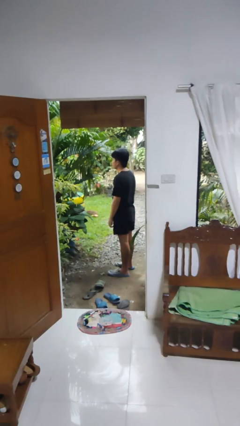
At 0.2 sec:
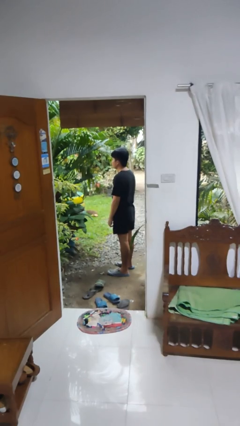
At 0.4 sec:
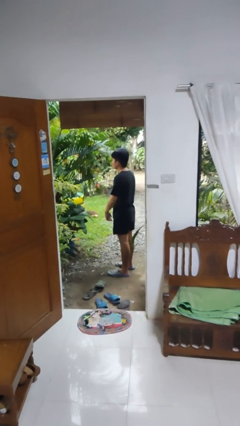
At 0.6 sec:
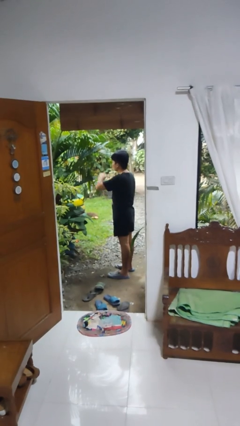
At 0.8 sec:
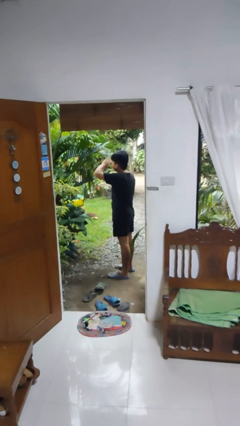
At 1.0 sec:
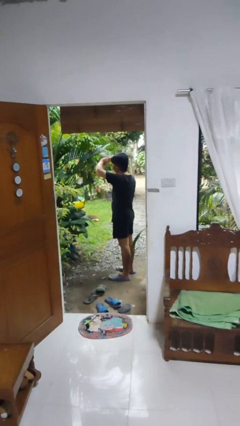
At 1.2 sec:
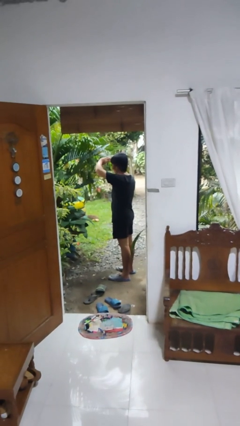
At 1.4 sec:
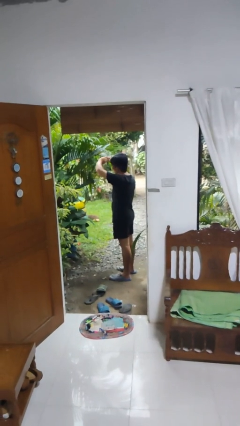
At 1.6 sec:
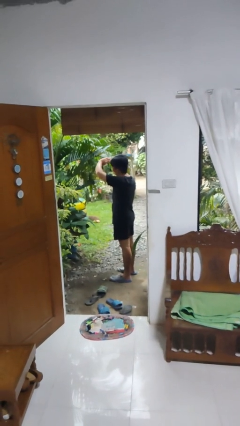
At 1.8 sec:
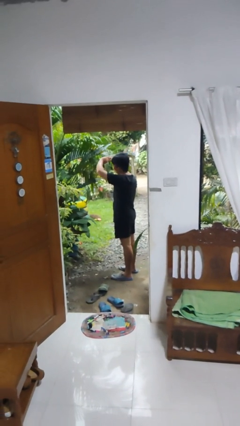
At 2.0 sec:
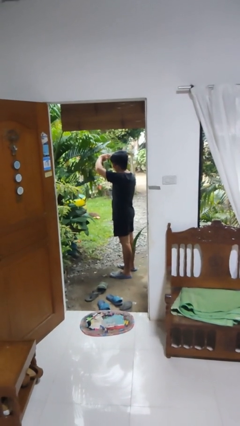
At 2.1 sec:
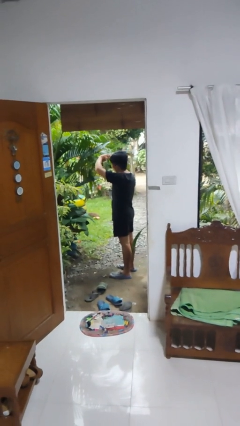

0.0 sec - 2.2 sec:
person shades eyes

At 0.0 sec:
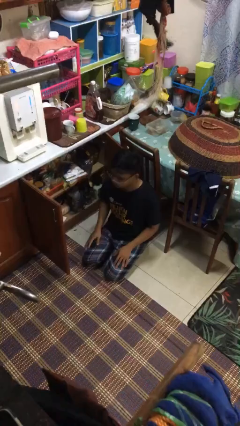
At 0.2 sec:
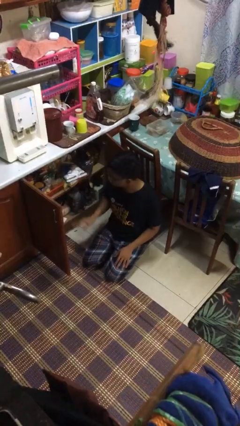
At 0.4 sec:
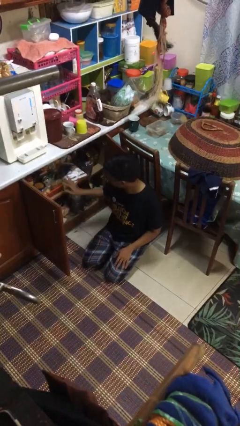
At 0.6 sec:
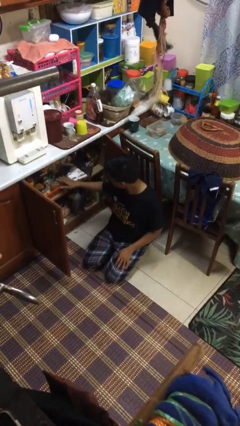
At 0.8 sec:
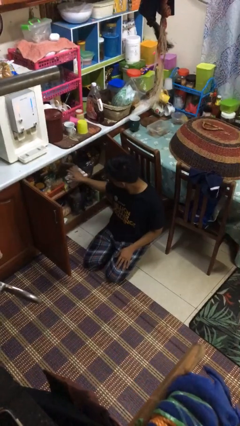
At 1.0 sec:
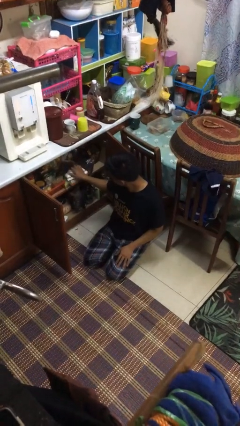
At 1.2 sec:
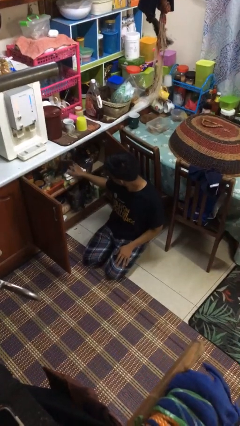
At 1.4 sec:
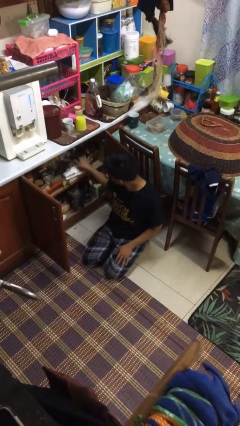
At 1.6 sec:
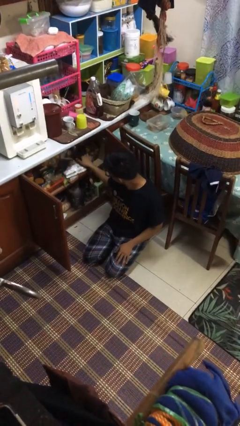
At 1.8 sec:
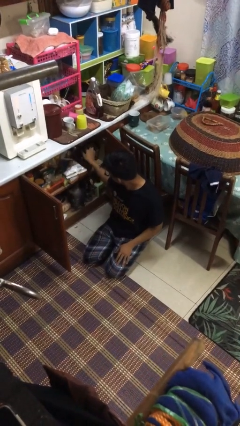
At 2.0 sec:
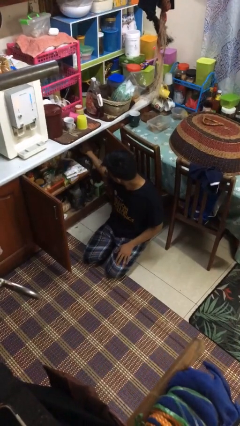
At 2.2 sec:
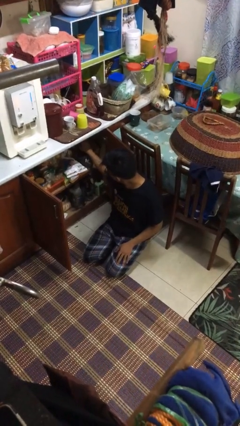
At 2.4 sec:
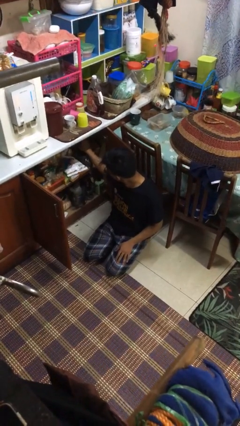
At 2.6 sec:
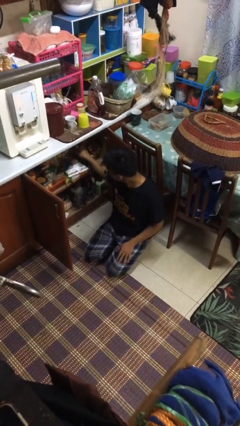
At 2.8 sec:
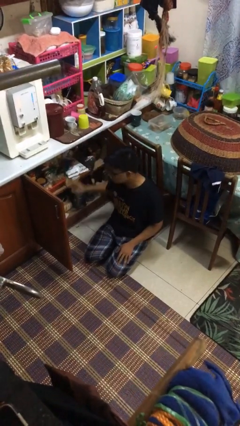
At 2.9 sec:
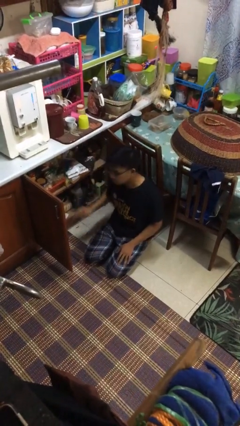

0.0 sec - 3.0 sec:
person searches in kitchen drawer

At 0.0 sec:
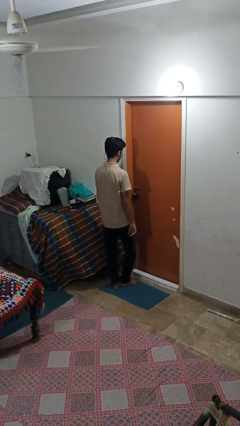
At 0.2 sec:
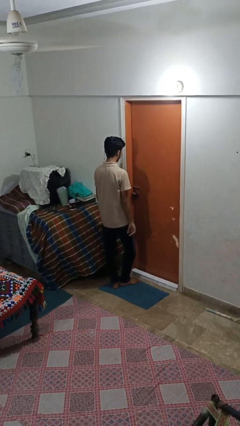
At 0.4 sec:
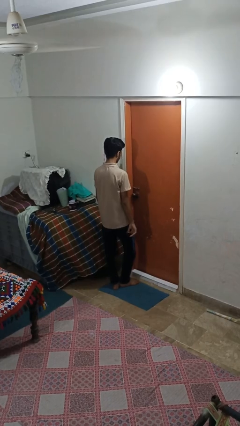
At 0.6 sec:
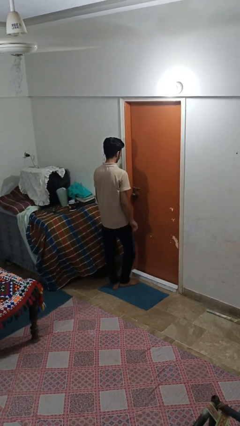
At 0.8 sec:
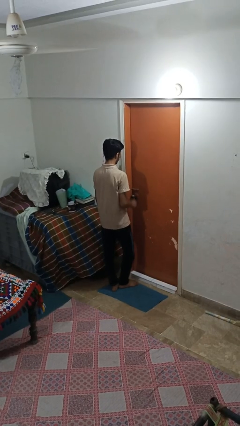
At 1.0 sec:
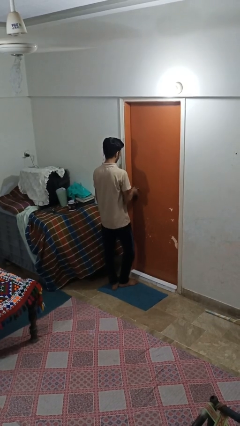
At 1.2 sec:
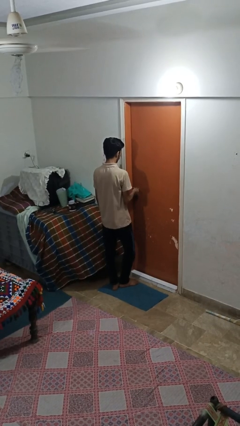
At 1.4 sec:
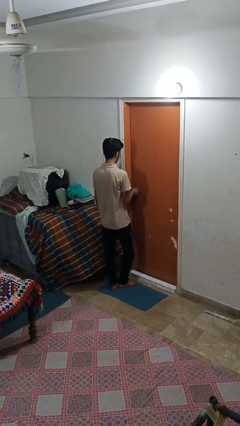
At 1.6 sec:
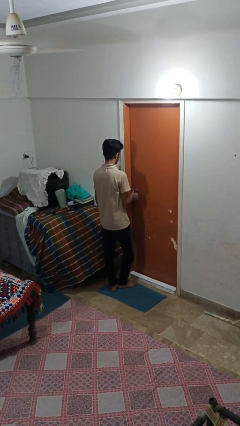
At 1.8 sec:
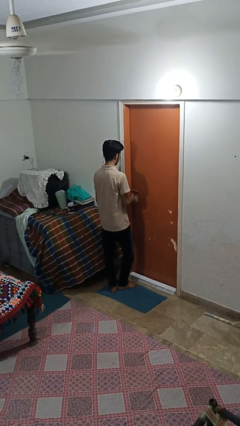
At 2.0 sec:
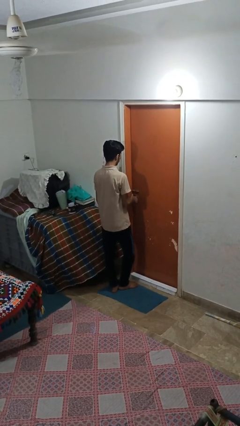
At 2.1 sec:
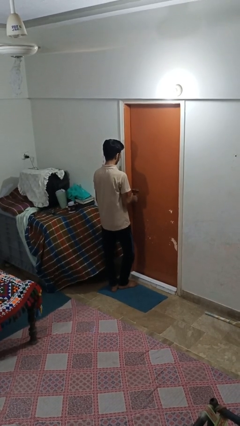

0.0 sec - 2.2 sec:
person unlocks door with keys

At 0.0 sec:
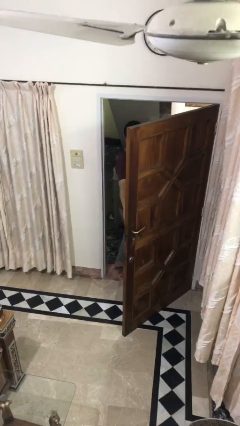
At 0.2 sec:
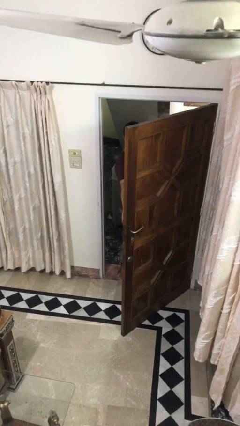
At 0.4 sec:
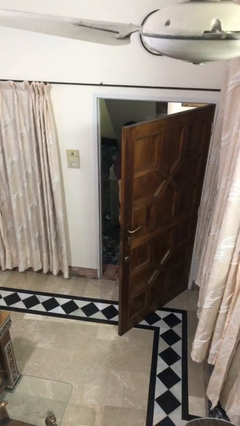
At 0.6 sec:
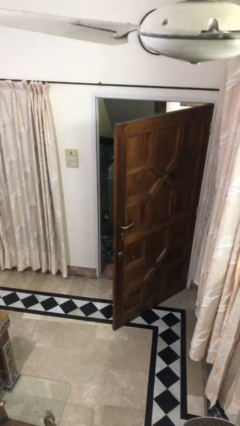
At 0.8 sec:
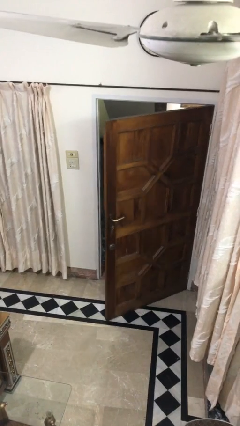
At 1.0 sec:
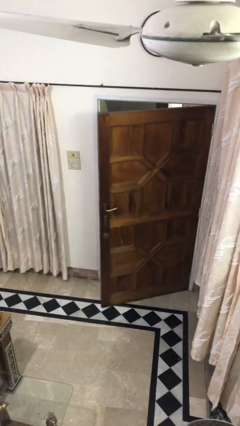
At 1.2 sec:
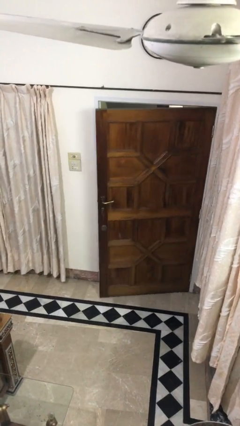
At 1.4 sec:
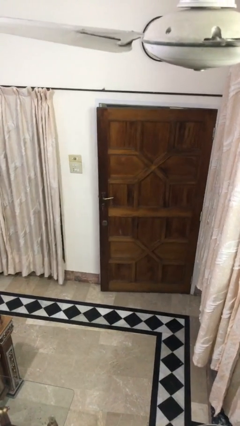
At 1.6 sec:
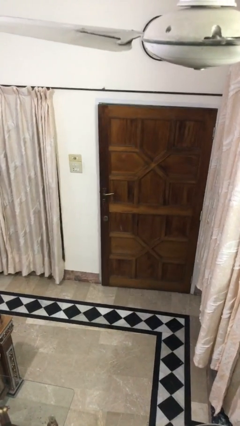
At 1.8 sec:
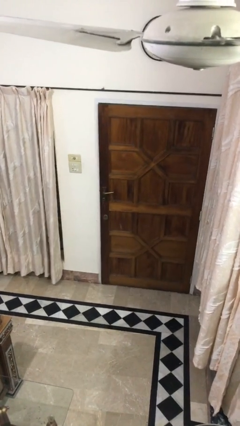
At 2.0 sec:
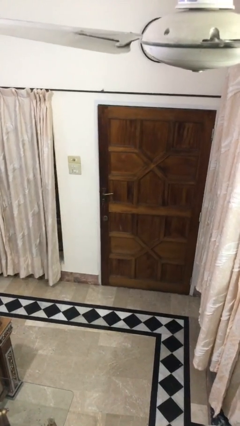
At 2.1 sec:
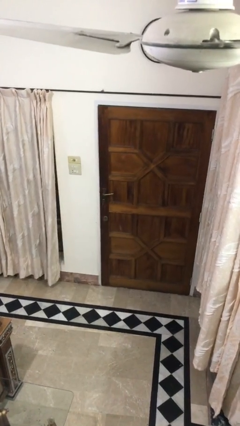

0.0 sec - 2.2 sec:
person closes facility door

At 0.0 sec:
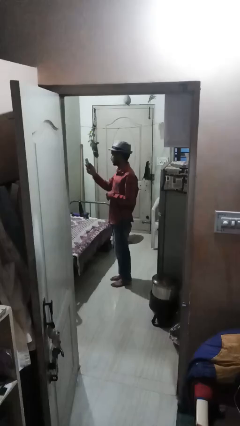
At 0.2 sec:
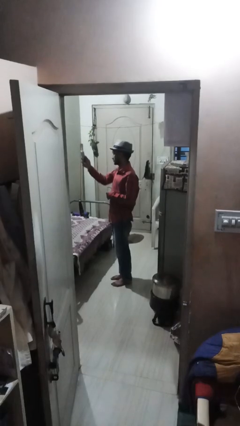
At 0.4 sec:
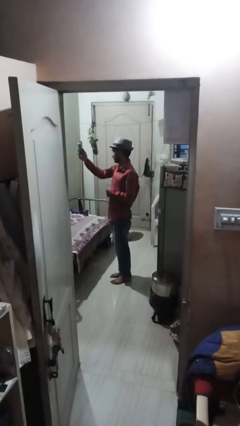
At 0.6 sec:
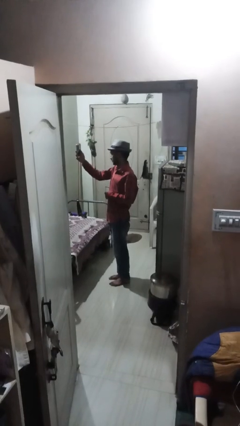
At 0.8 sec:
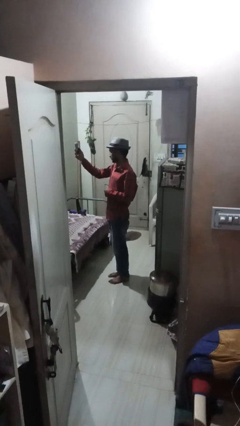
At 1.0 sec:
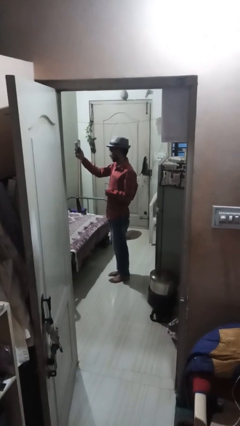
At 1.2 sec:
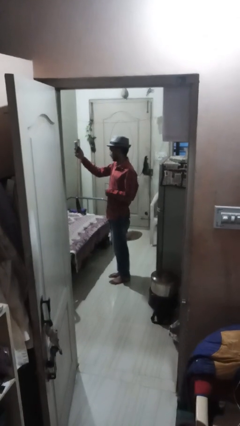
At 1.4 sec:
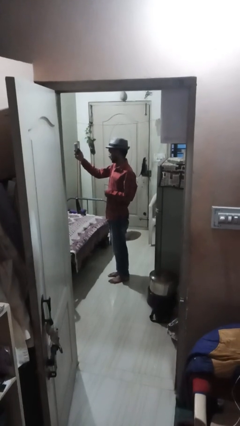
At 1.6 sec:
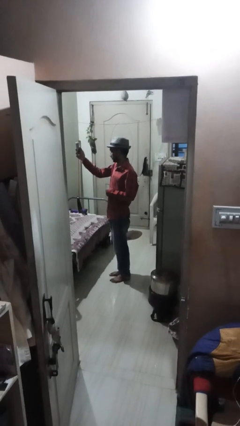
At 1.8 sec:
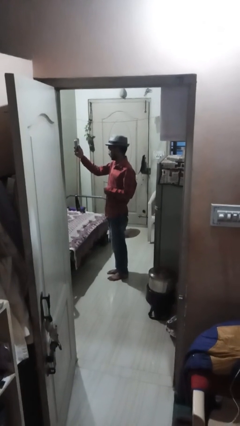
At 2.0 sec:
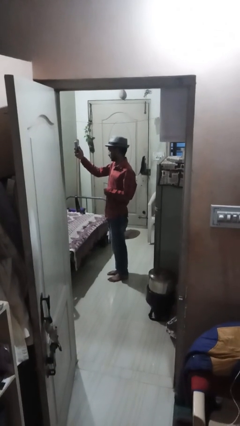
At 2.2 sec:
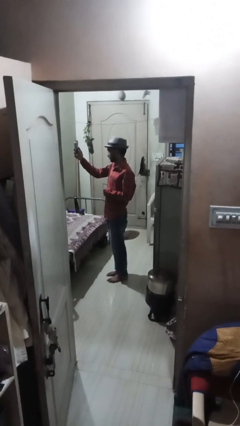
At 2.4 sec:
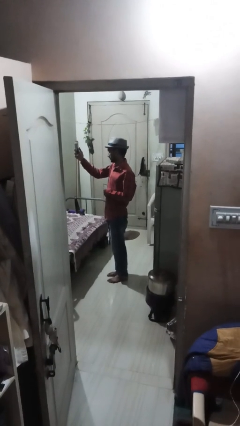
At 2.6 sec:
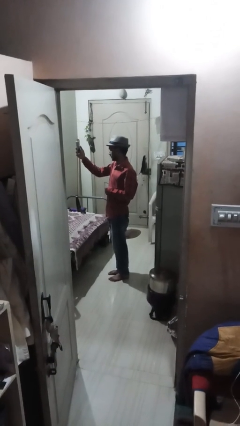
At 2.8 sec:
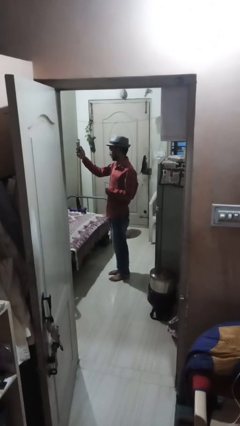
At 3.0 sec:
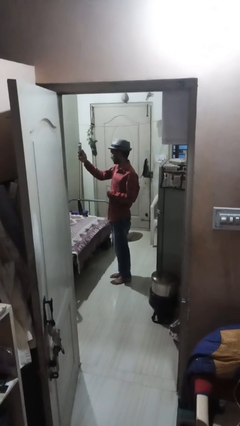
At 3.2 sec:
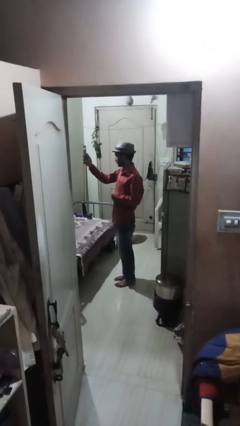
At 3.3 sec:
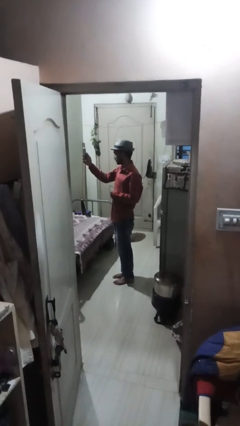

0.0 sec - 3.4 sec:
person takes selfie

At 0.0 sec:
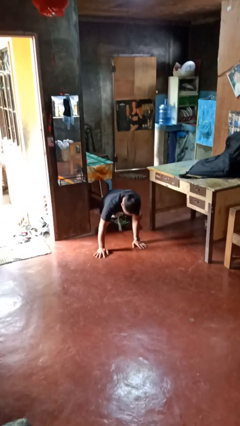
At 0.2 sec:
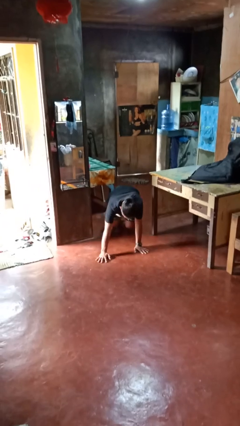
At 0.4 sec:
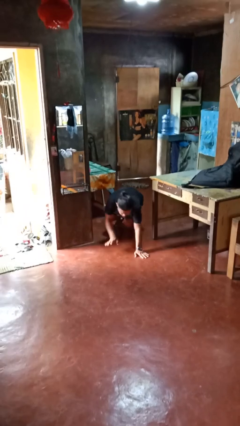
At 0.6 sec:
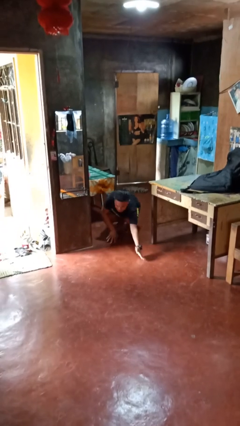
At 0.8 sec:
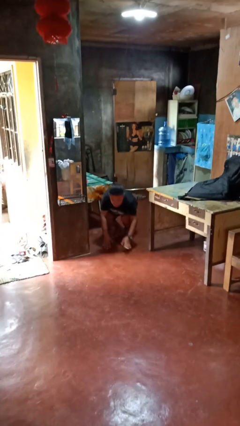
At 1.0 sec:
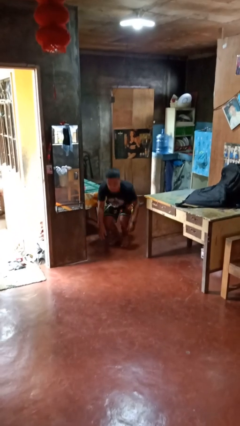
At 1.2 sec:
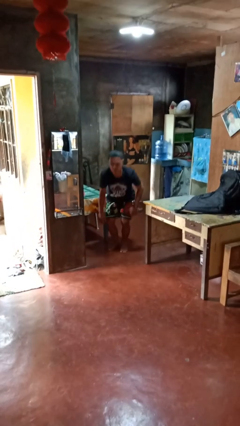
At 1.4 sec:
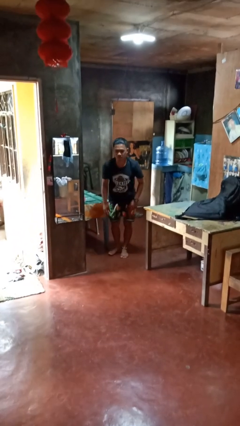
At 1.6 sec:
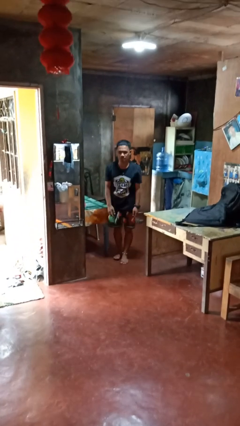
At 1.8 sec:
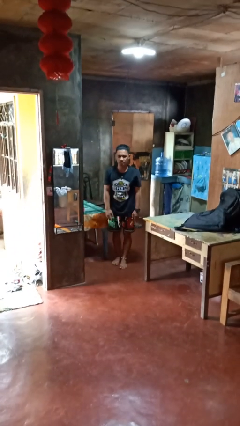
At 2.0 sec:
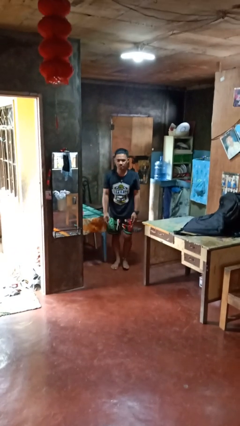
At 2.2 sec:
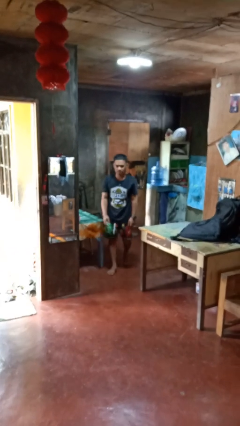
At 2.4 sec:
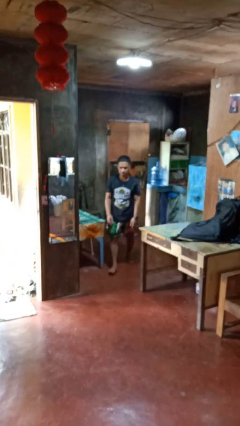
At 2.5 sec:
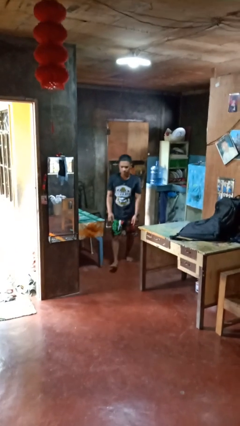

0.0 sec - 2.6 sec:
person stands up from floor

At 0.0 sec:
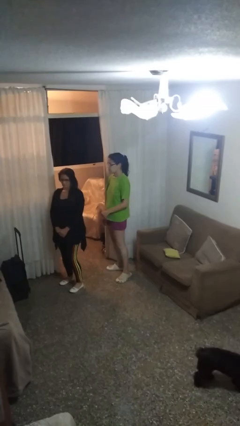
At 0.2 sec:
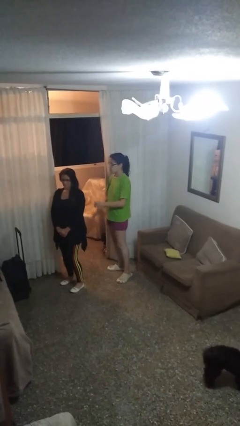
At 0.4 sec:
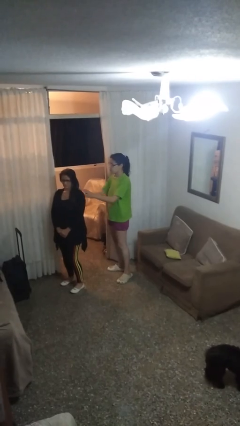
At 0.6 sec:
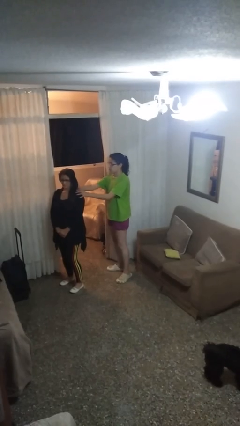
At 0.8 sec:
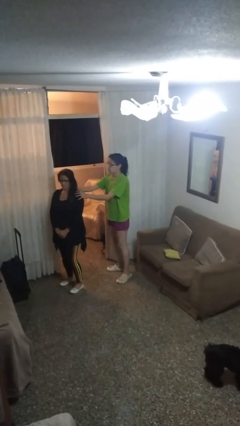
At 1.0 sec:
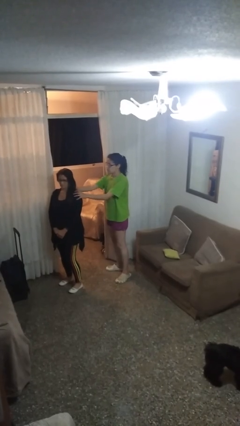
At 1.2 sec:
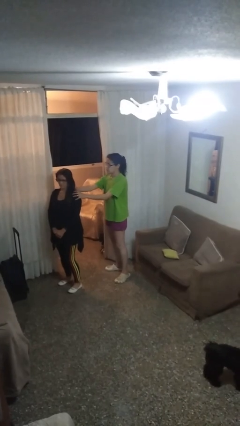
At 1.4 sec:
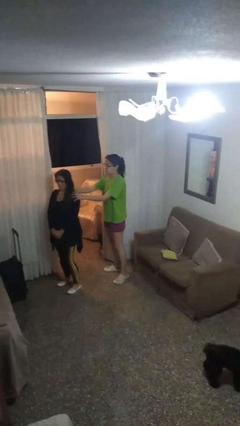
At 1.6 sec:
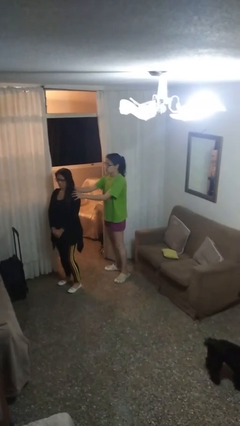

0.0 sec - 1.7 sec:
person grabs person by shoulder
